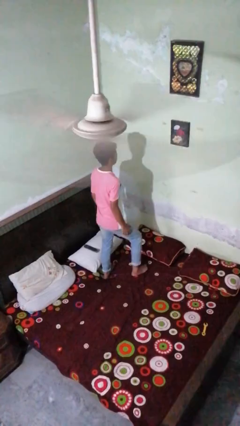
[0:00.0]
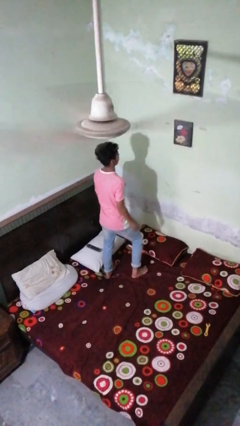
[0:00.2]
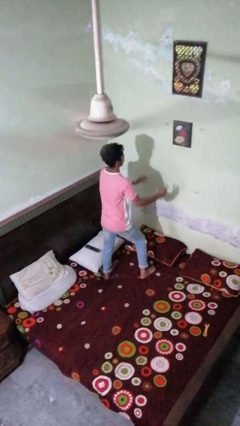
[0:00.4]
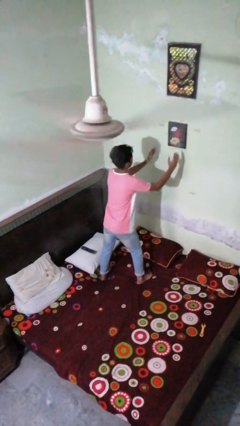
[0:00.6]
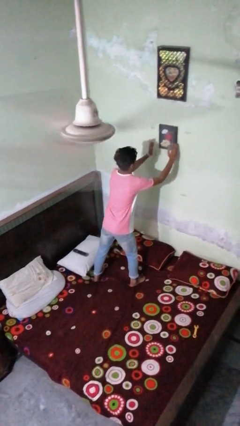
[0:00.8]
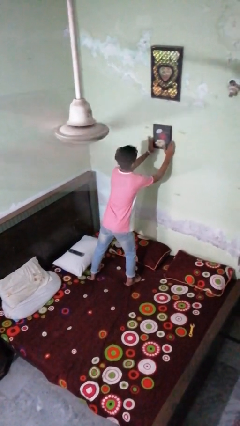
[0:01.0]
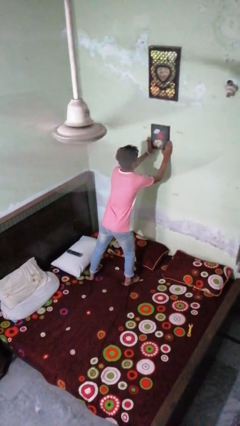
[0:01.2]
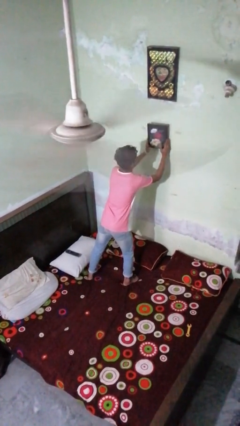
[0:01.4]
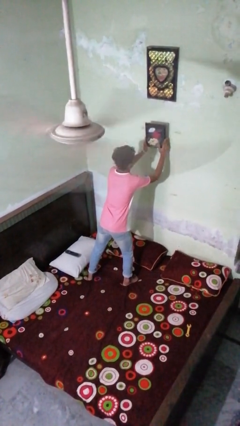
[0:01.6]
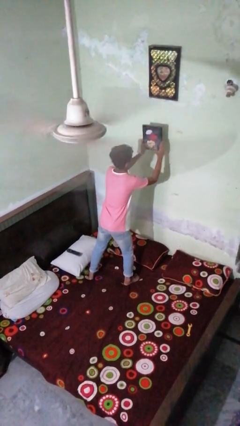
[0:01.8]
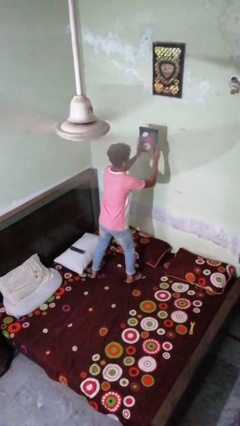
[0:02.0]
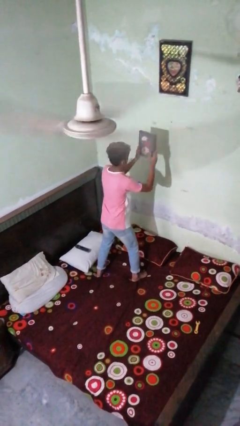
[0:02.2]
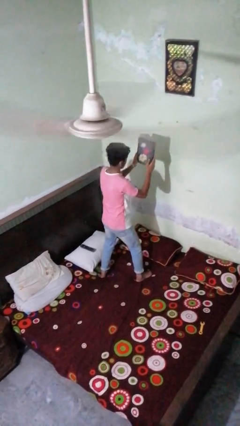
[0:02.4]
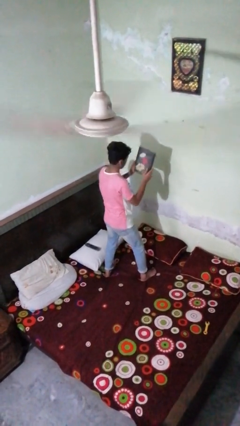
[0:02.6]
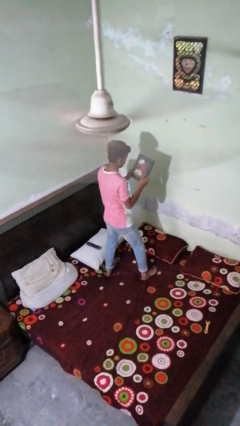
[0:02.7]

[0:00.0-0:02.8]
person takes down picture frame

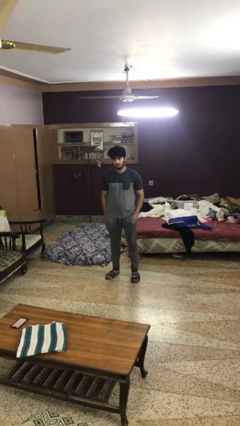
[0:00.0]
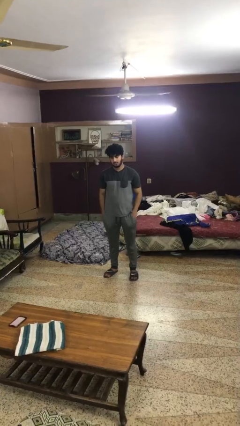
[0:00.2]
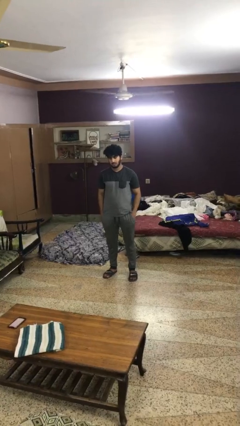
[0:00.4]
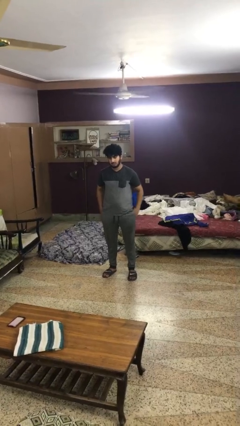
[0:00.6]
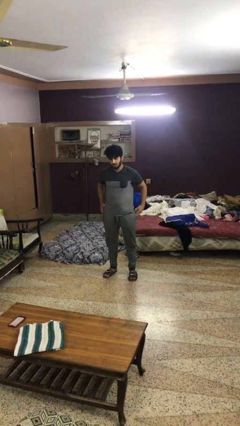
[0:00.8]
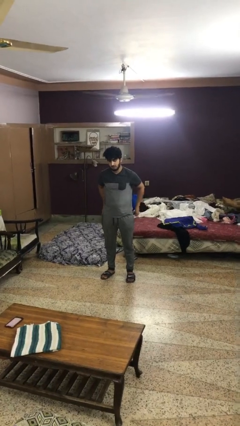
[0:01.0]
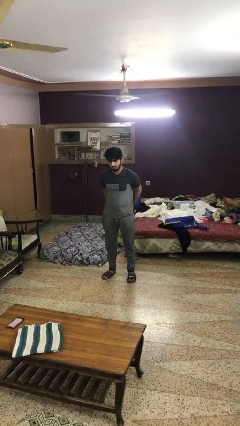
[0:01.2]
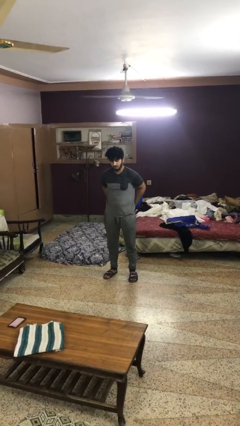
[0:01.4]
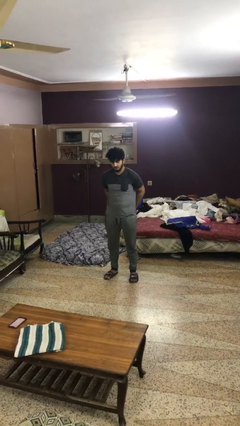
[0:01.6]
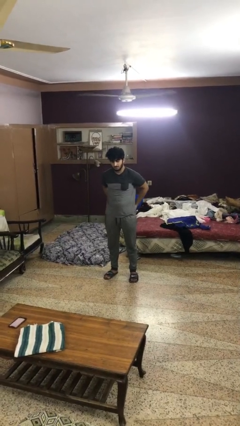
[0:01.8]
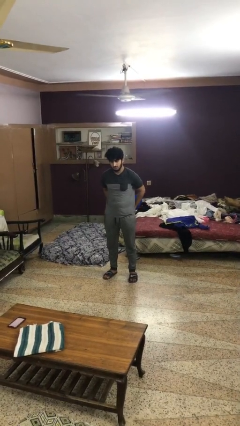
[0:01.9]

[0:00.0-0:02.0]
person puts hands in back pockets

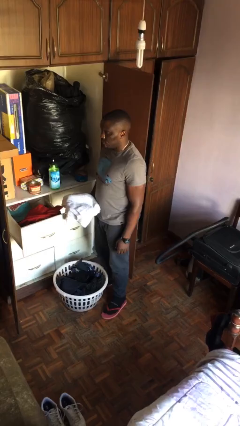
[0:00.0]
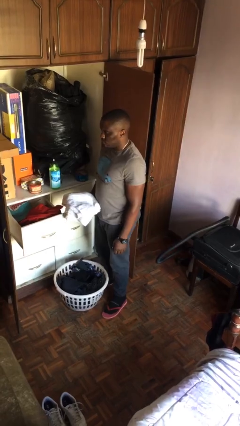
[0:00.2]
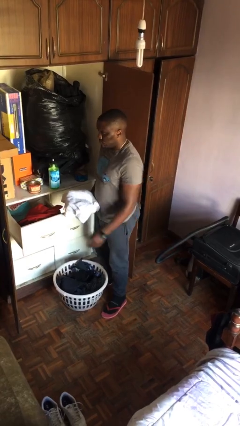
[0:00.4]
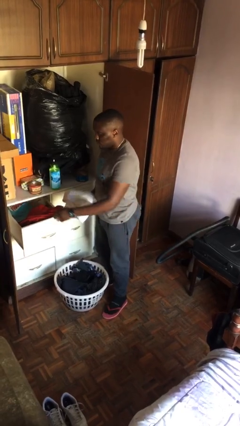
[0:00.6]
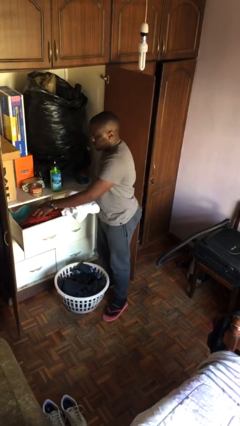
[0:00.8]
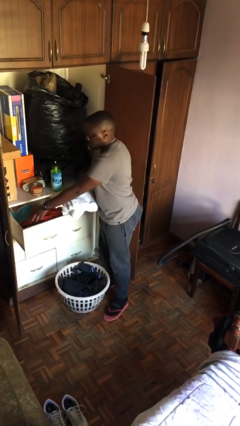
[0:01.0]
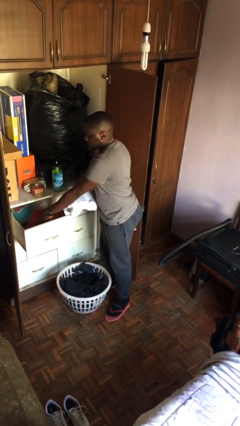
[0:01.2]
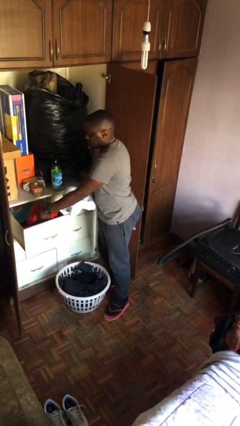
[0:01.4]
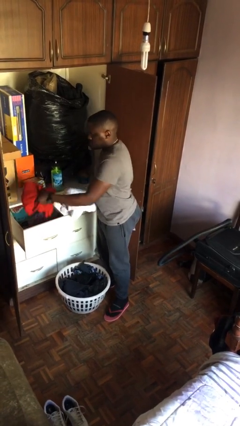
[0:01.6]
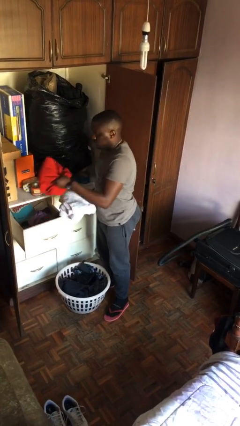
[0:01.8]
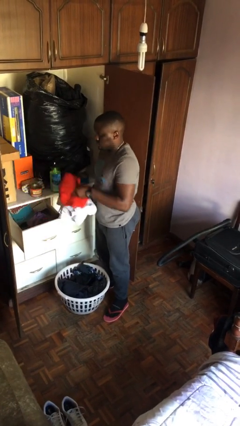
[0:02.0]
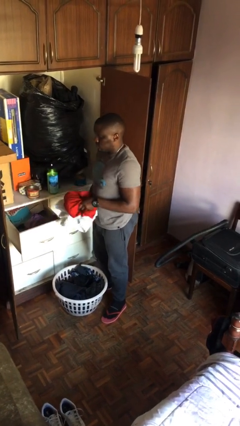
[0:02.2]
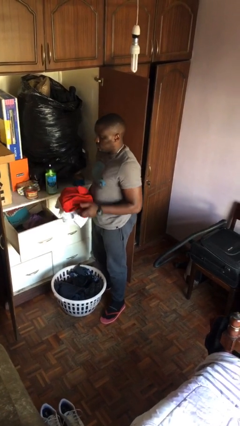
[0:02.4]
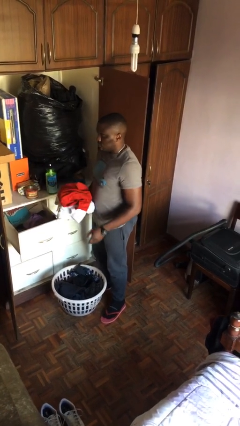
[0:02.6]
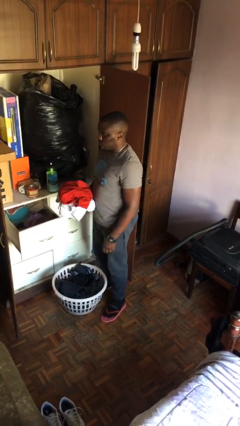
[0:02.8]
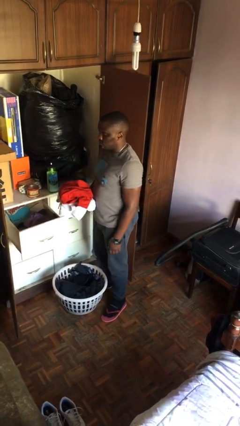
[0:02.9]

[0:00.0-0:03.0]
person takes clothes from dresser

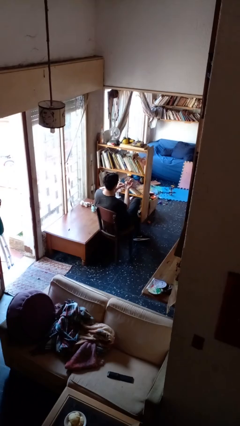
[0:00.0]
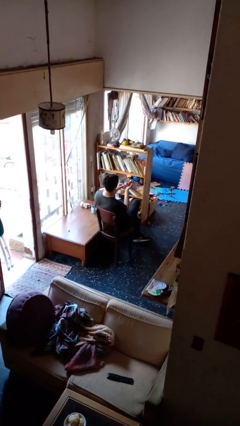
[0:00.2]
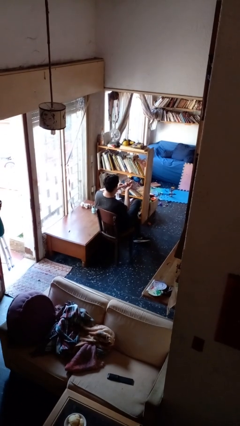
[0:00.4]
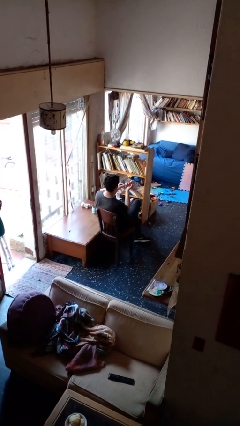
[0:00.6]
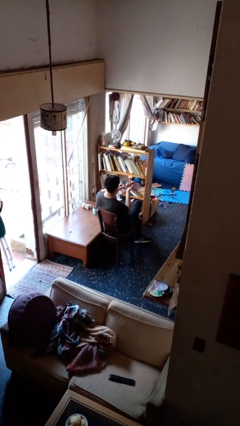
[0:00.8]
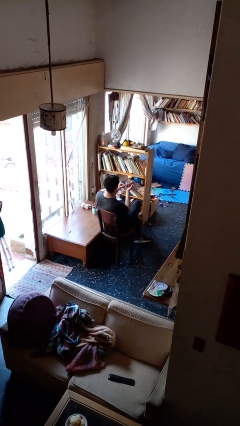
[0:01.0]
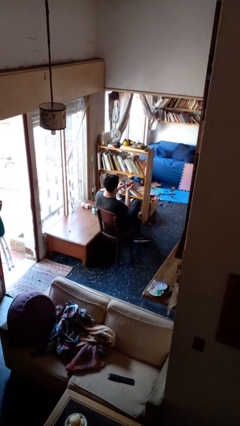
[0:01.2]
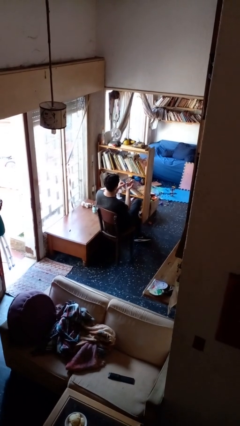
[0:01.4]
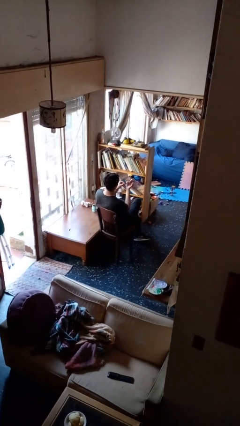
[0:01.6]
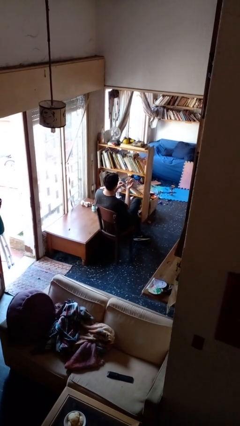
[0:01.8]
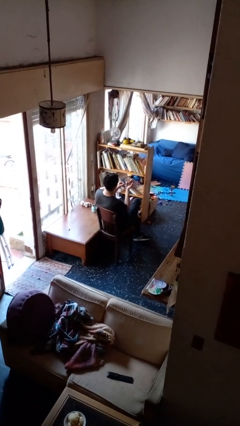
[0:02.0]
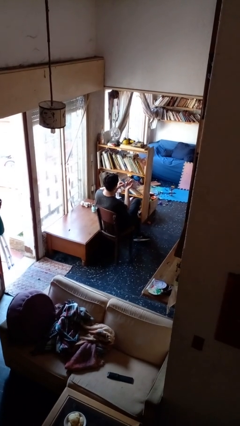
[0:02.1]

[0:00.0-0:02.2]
person files fingernails

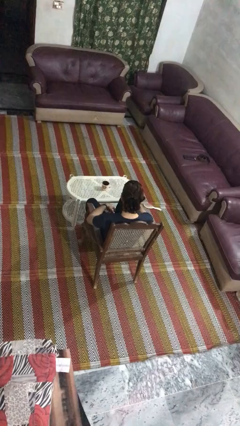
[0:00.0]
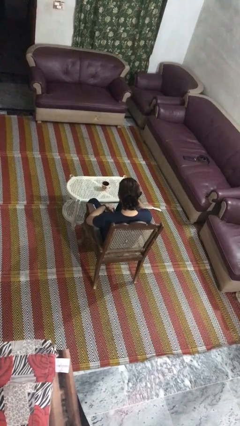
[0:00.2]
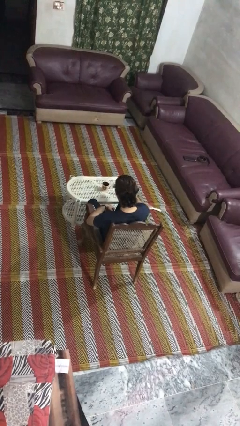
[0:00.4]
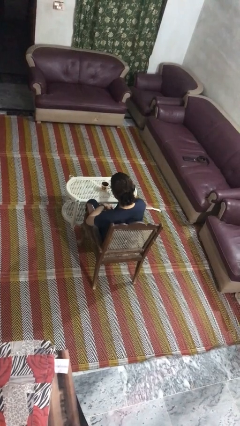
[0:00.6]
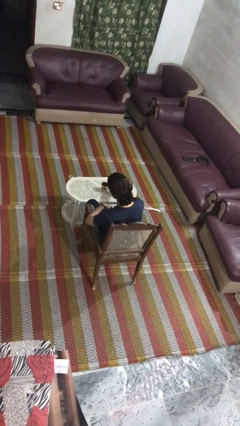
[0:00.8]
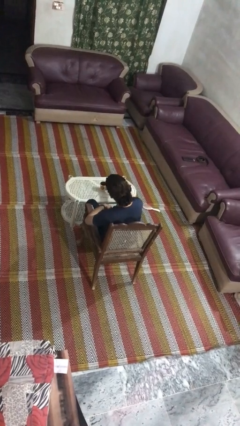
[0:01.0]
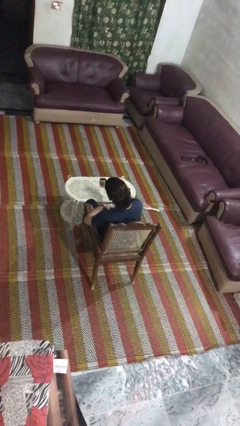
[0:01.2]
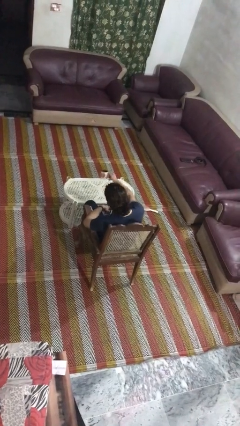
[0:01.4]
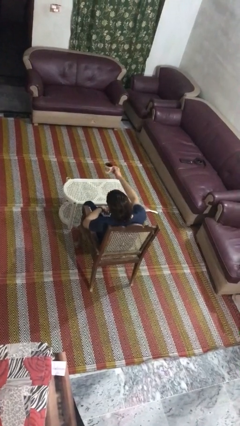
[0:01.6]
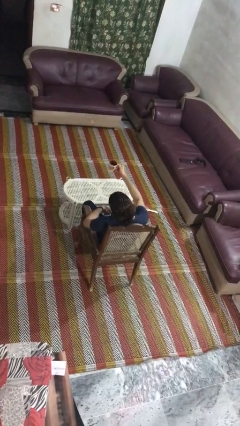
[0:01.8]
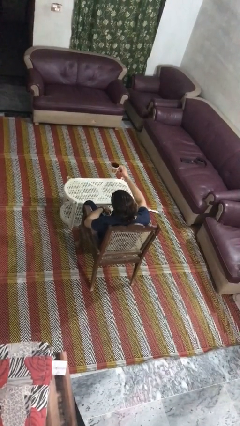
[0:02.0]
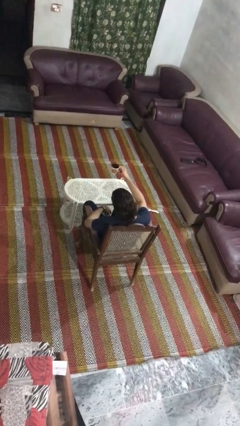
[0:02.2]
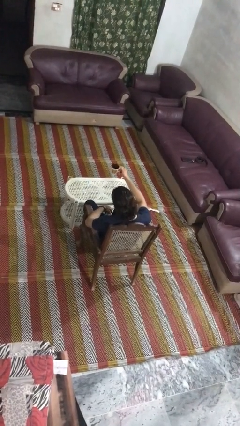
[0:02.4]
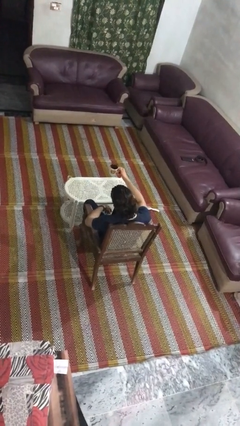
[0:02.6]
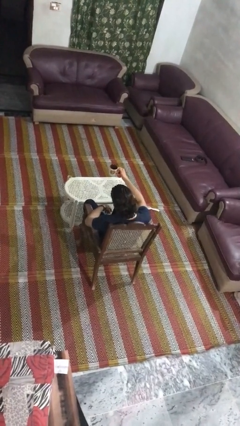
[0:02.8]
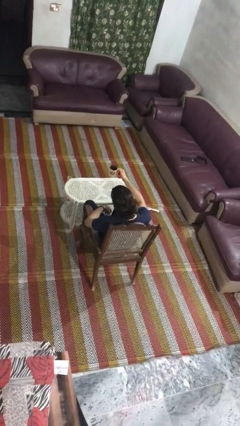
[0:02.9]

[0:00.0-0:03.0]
person picks up object from table

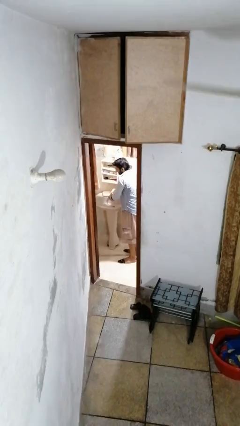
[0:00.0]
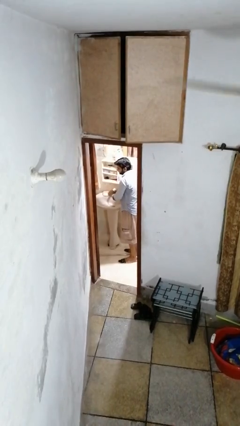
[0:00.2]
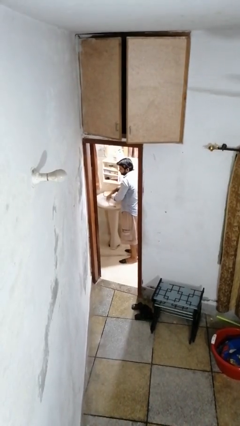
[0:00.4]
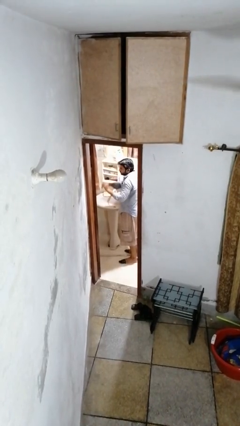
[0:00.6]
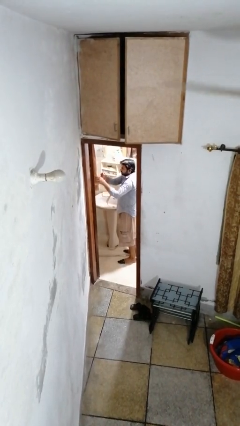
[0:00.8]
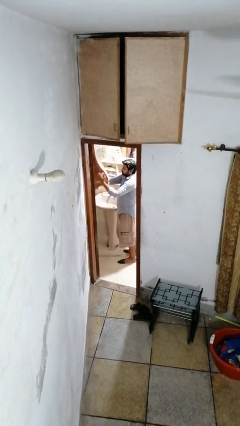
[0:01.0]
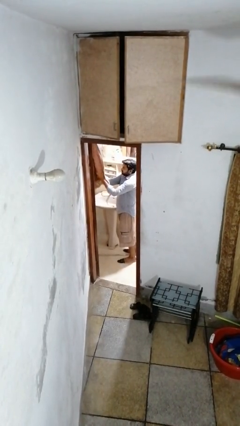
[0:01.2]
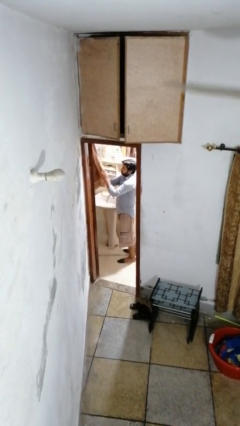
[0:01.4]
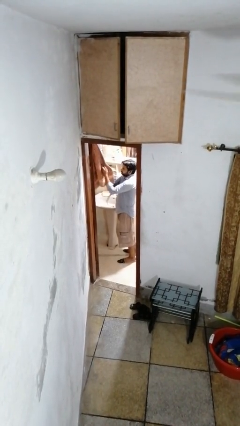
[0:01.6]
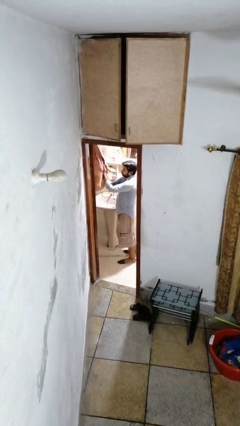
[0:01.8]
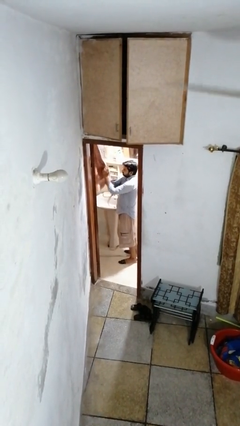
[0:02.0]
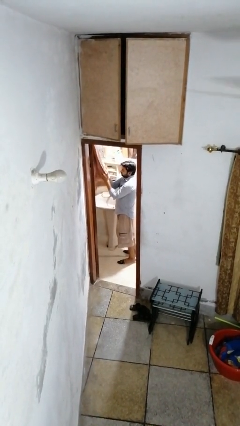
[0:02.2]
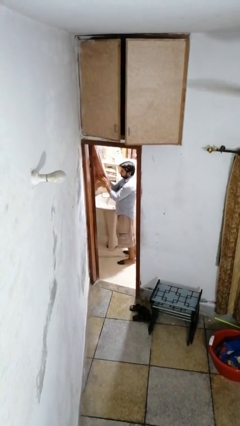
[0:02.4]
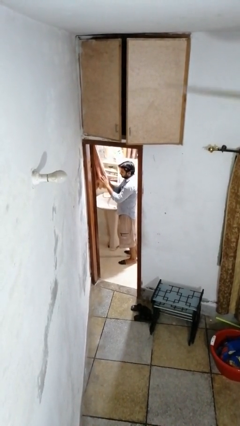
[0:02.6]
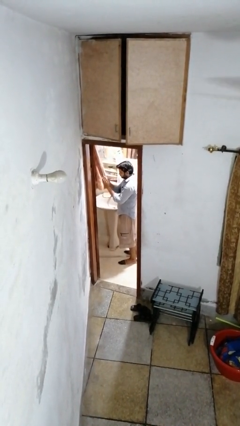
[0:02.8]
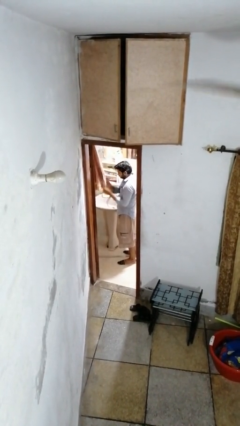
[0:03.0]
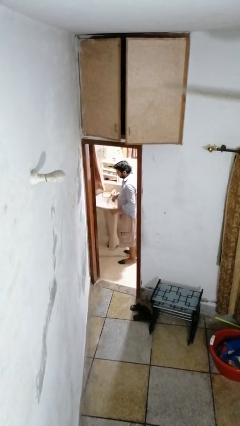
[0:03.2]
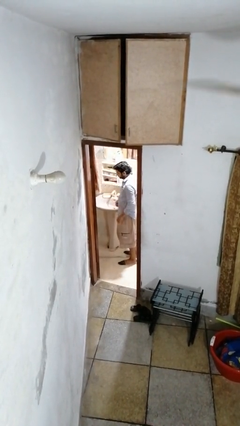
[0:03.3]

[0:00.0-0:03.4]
person dries hands with towel

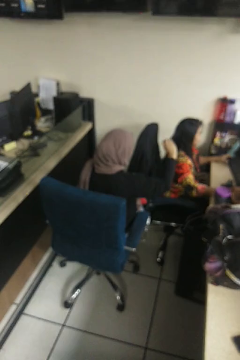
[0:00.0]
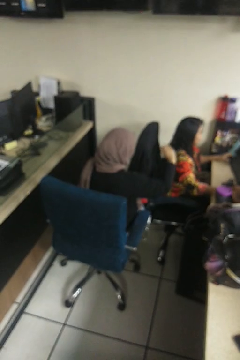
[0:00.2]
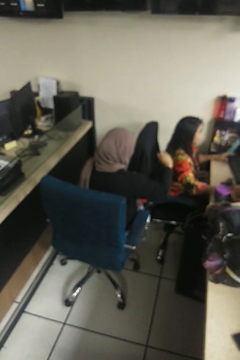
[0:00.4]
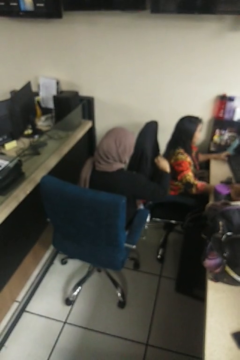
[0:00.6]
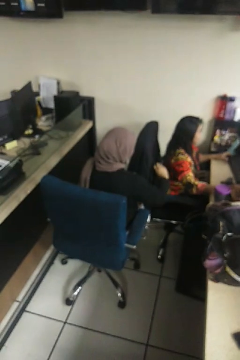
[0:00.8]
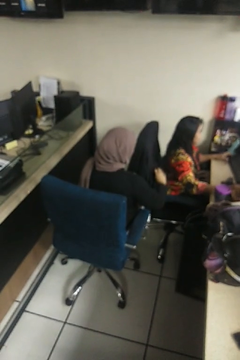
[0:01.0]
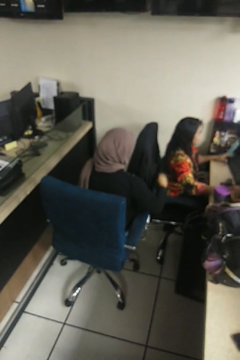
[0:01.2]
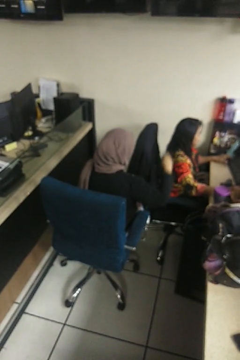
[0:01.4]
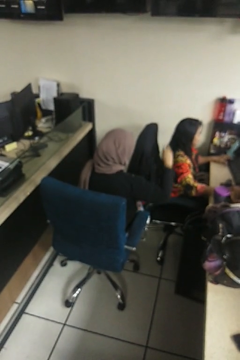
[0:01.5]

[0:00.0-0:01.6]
person brushes hair of person
